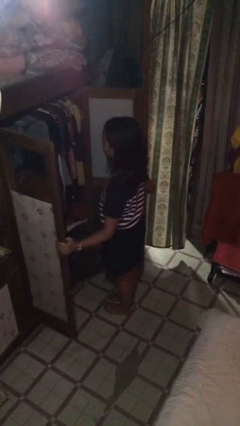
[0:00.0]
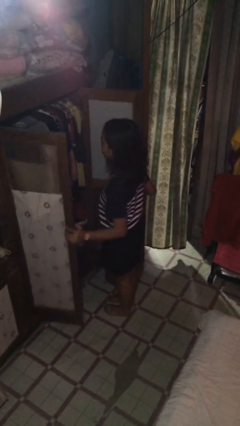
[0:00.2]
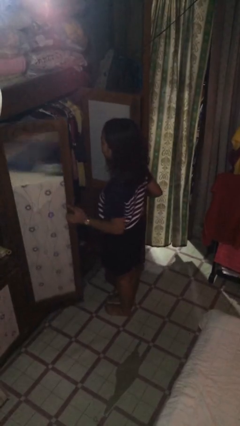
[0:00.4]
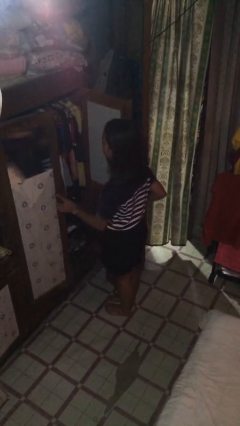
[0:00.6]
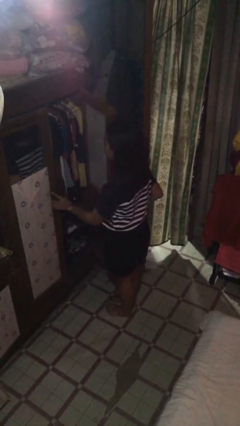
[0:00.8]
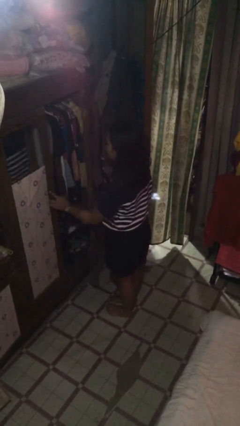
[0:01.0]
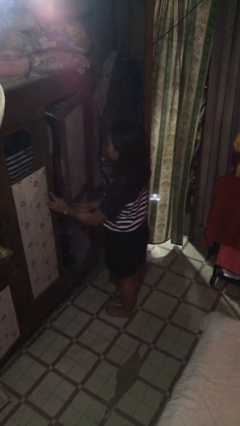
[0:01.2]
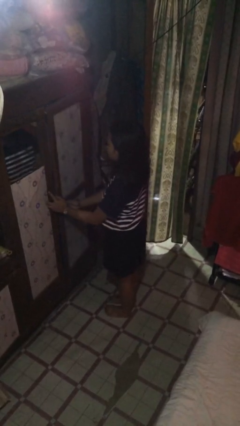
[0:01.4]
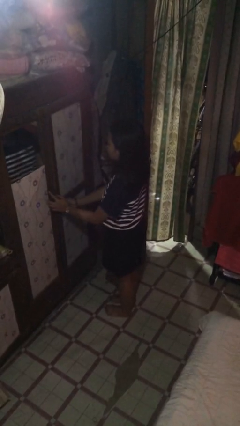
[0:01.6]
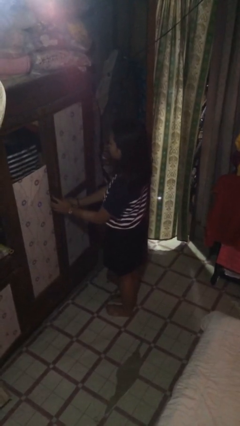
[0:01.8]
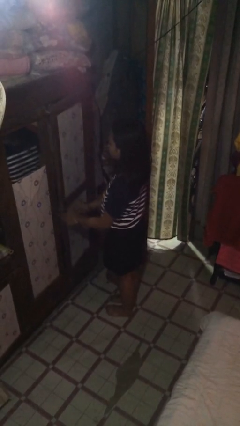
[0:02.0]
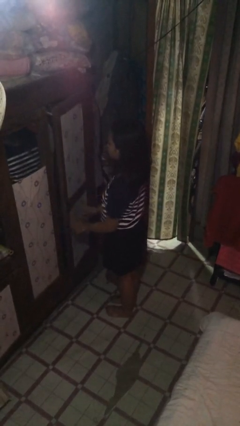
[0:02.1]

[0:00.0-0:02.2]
person closes closet door

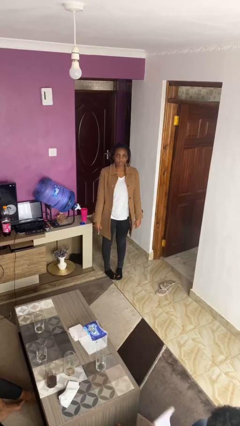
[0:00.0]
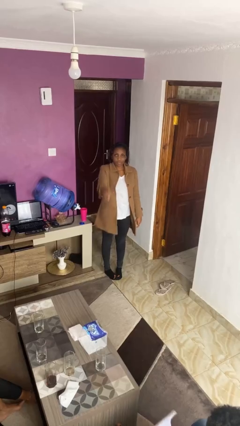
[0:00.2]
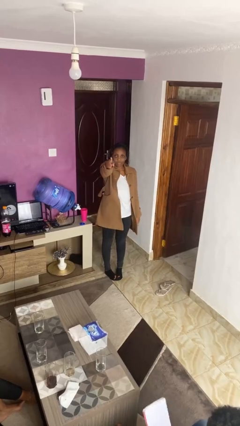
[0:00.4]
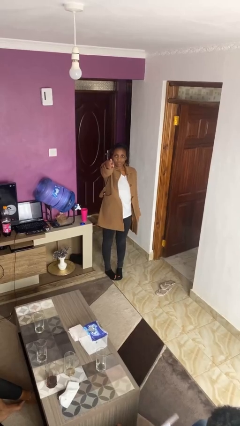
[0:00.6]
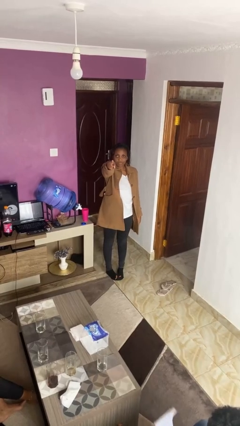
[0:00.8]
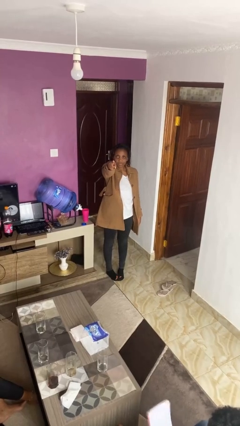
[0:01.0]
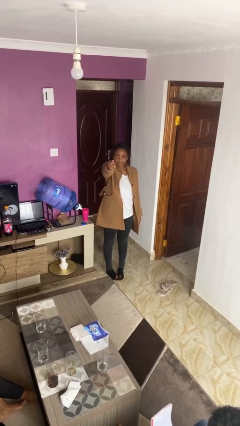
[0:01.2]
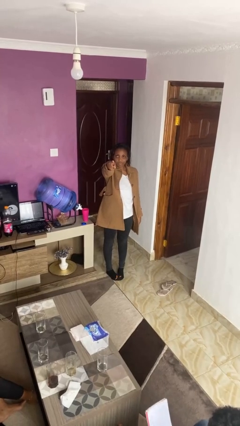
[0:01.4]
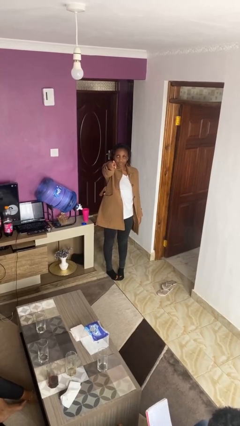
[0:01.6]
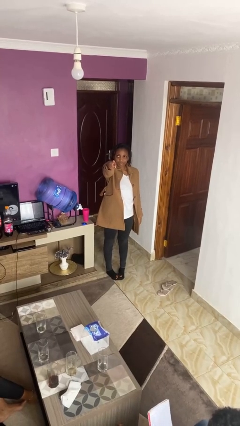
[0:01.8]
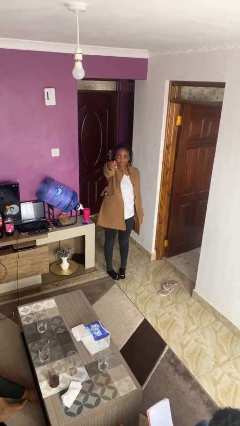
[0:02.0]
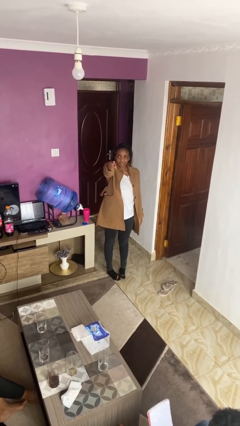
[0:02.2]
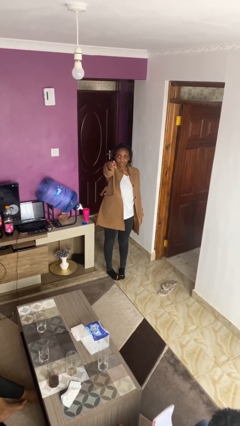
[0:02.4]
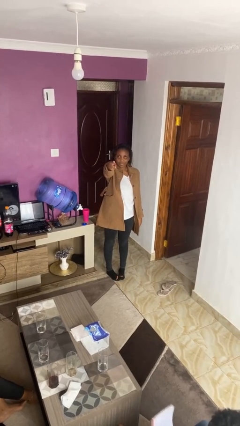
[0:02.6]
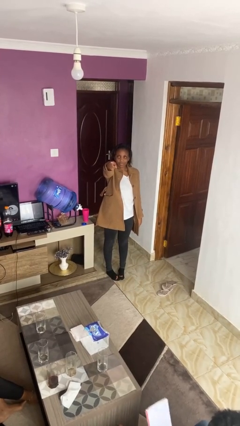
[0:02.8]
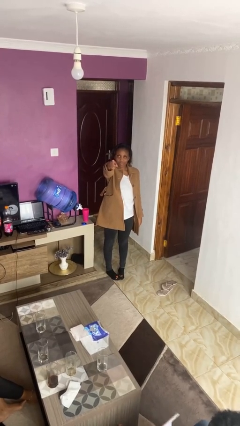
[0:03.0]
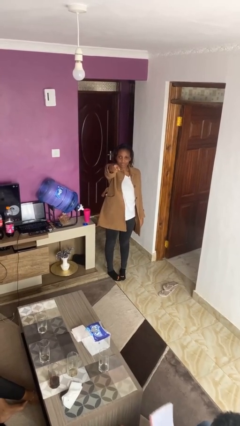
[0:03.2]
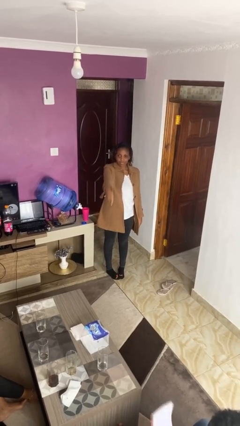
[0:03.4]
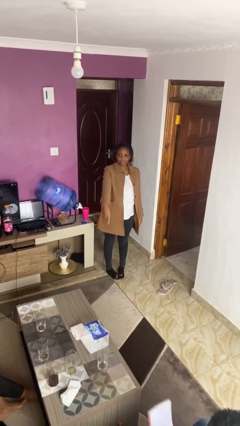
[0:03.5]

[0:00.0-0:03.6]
person points at person

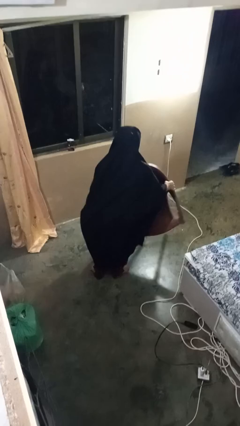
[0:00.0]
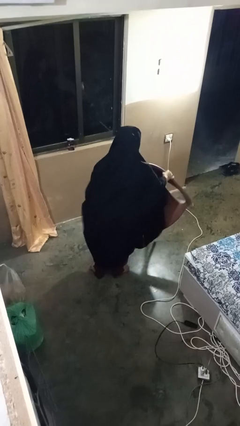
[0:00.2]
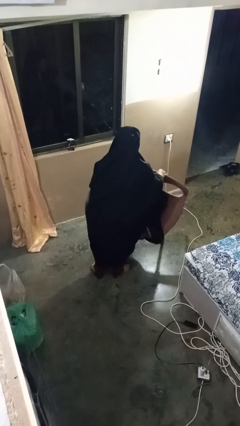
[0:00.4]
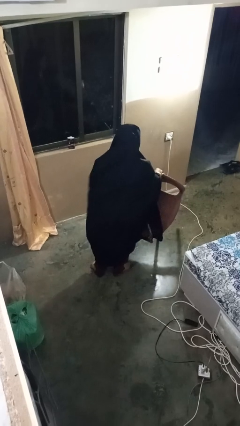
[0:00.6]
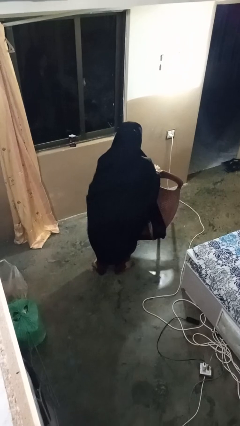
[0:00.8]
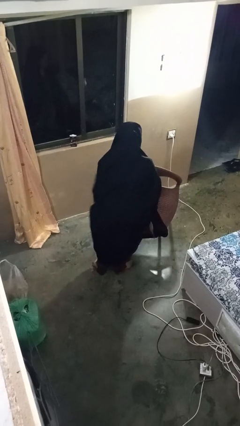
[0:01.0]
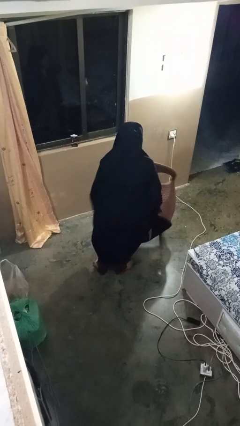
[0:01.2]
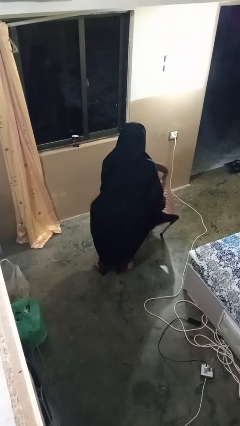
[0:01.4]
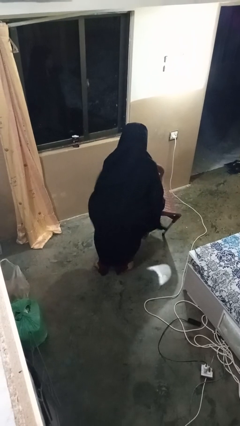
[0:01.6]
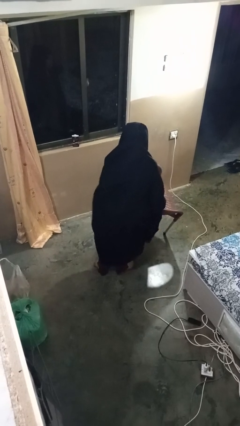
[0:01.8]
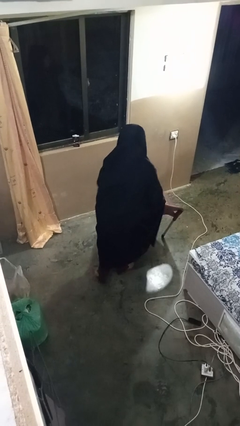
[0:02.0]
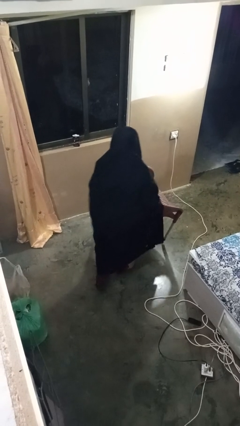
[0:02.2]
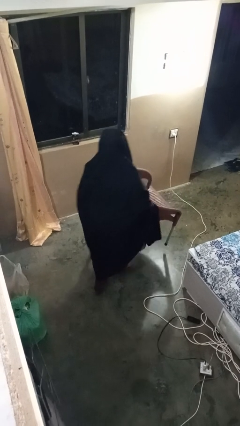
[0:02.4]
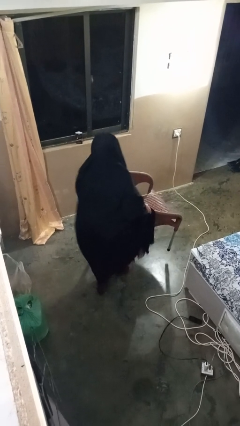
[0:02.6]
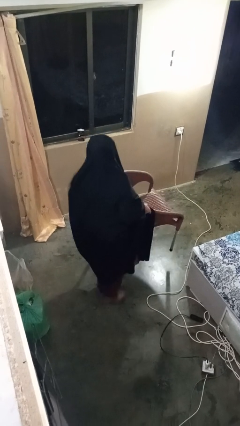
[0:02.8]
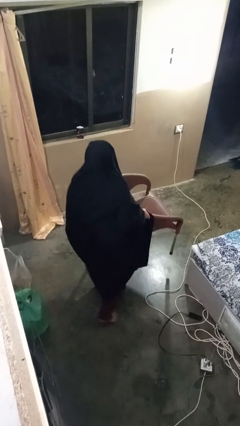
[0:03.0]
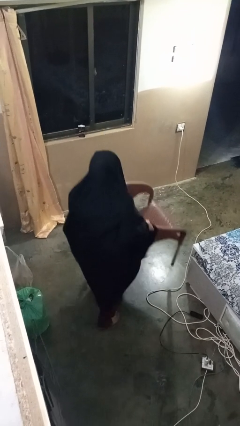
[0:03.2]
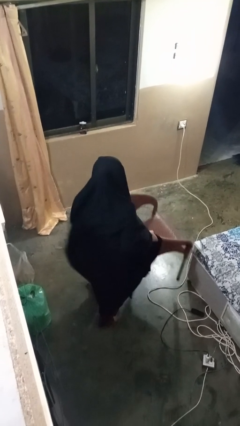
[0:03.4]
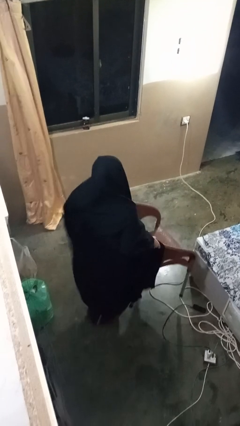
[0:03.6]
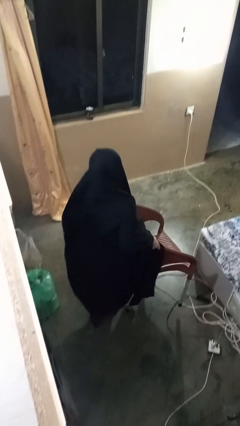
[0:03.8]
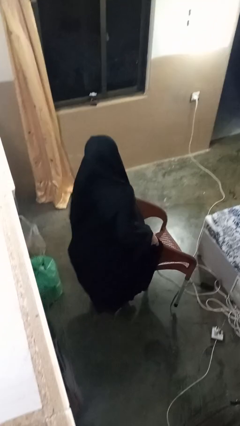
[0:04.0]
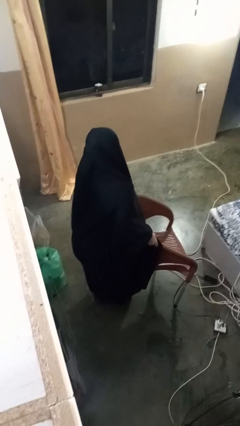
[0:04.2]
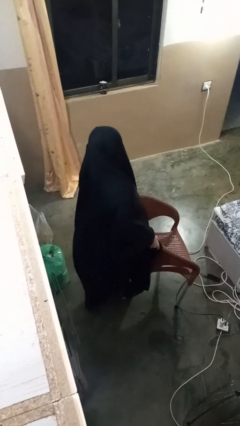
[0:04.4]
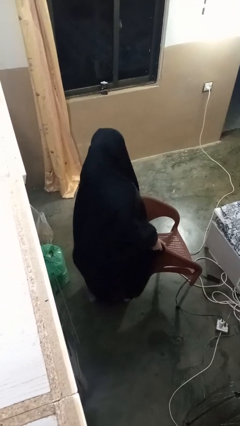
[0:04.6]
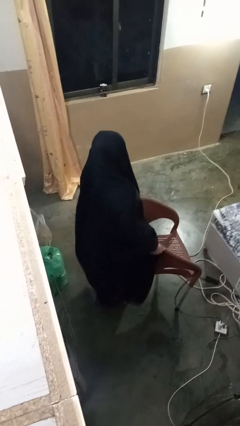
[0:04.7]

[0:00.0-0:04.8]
person carries furniture

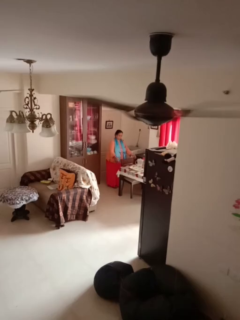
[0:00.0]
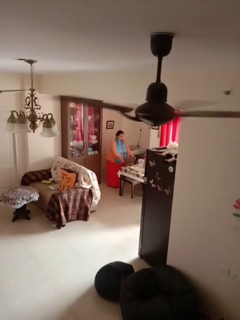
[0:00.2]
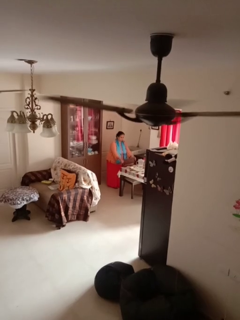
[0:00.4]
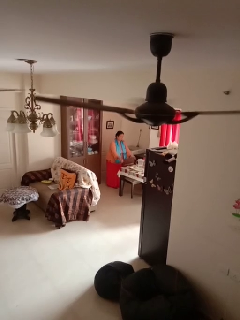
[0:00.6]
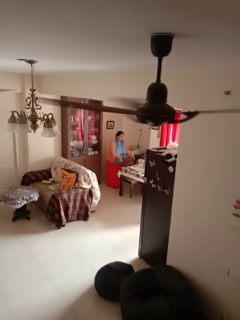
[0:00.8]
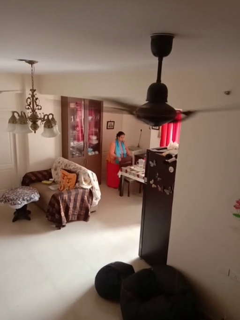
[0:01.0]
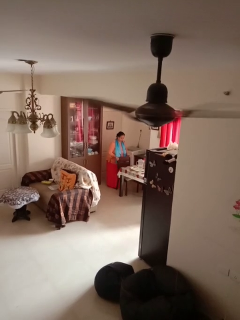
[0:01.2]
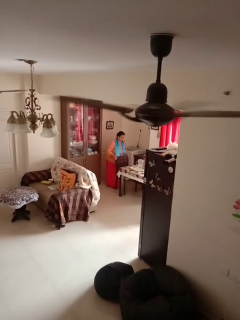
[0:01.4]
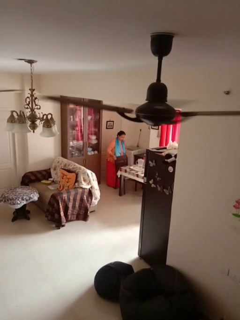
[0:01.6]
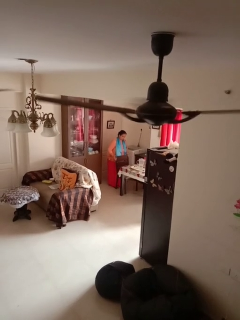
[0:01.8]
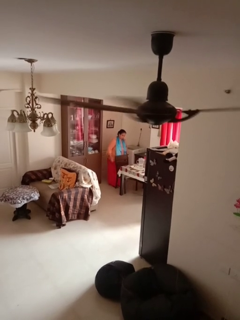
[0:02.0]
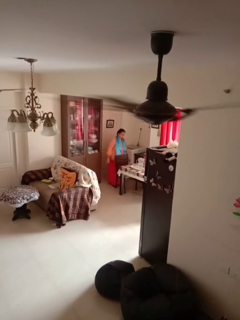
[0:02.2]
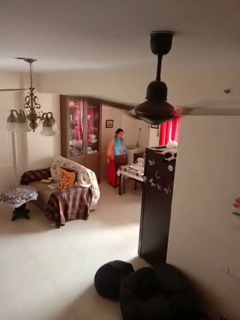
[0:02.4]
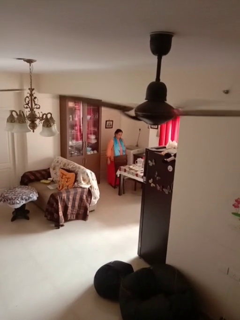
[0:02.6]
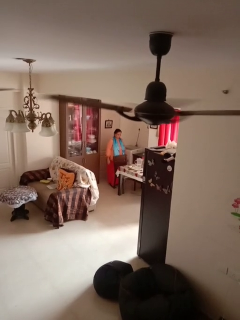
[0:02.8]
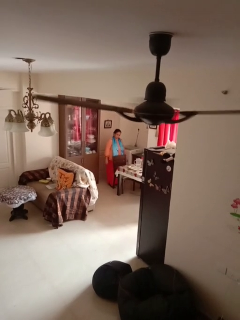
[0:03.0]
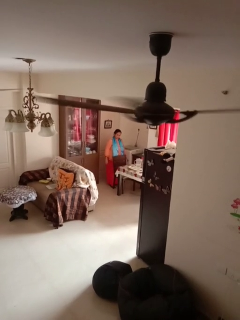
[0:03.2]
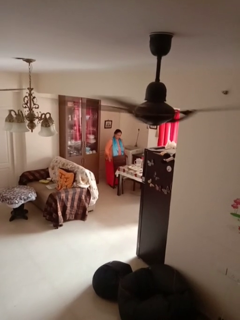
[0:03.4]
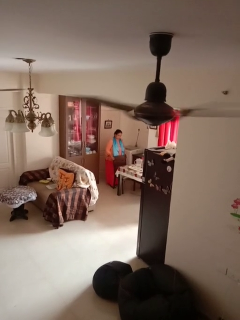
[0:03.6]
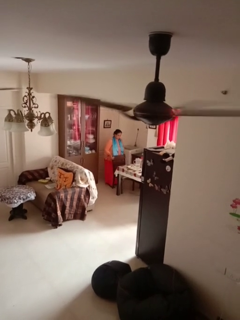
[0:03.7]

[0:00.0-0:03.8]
person pulls out chair

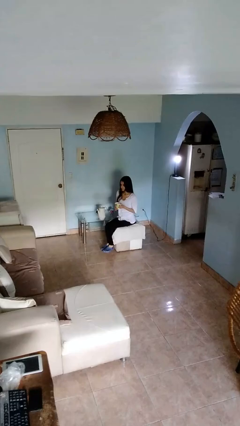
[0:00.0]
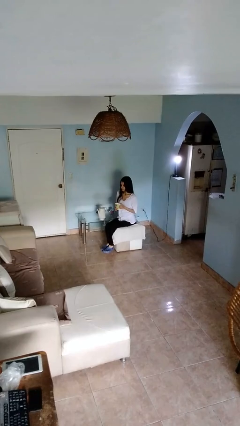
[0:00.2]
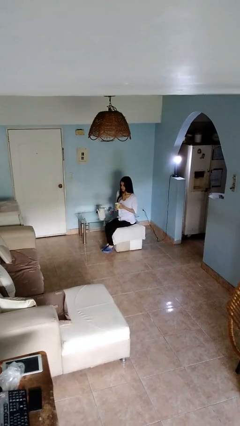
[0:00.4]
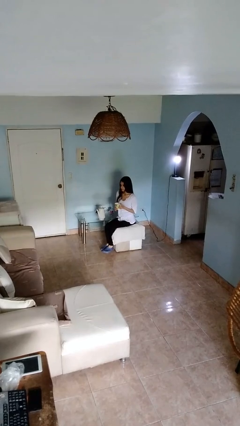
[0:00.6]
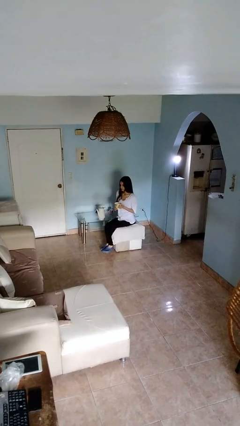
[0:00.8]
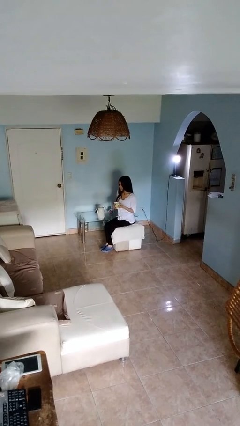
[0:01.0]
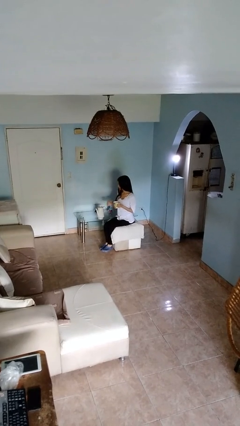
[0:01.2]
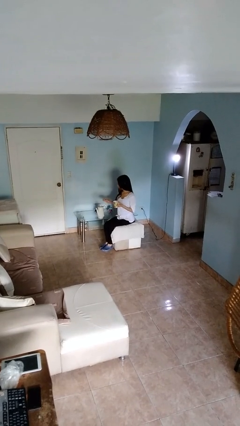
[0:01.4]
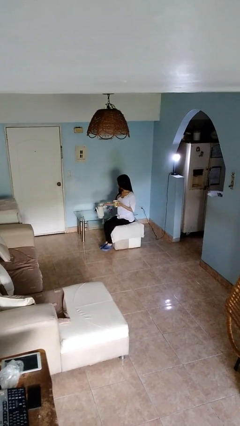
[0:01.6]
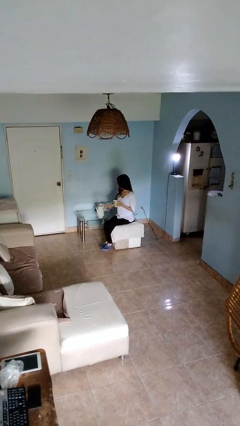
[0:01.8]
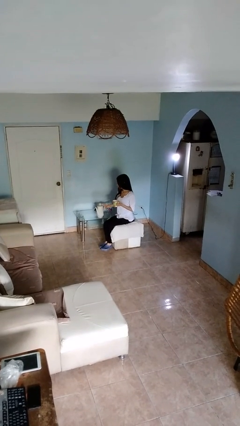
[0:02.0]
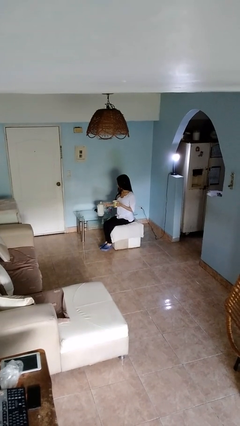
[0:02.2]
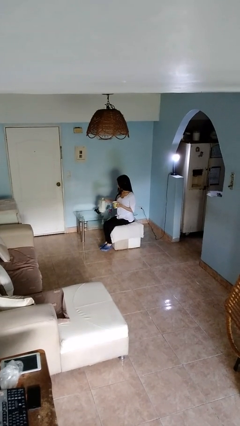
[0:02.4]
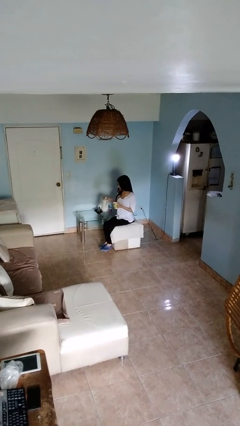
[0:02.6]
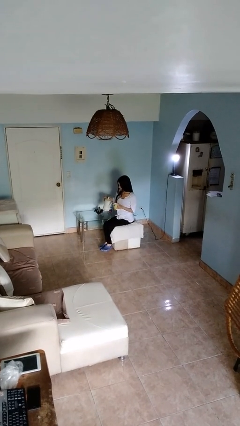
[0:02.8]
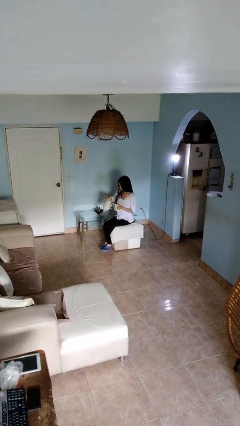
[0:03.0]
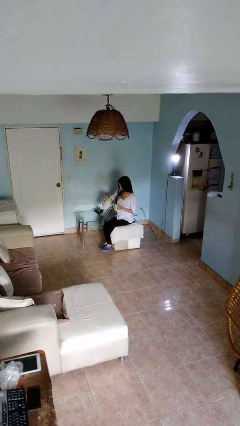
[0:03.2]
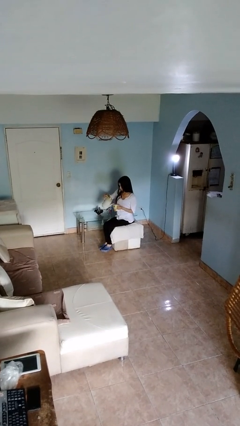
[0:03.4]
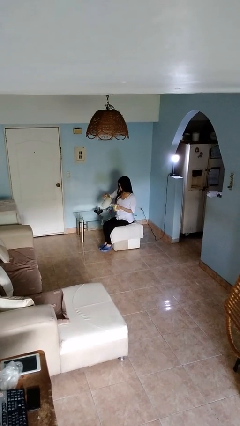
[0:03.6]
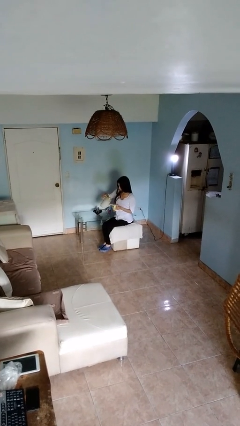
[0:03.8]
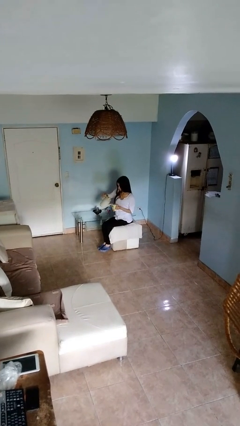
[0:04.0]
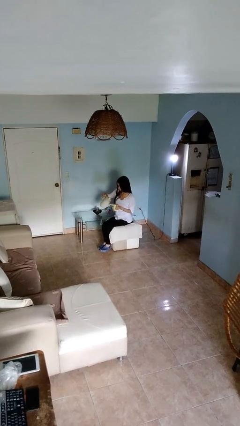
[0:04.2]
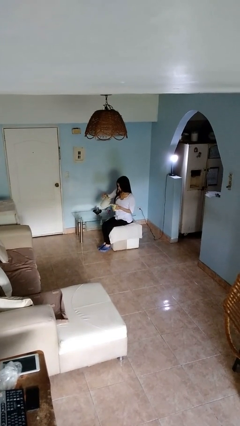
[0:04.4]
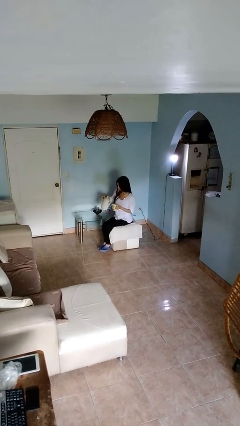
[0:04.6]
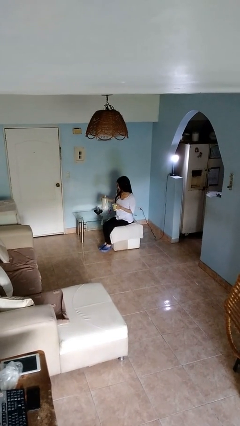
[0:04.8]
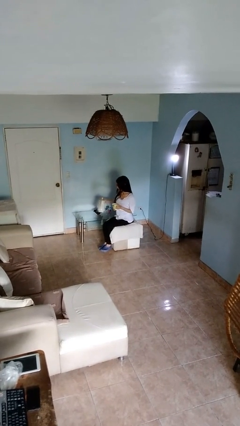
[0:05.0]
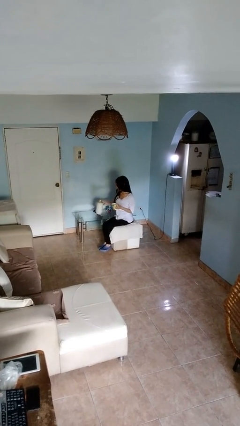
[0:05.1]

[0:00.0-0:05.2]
person pours coffee into mug
